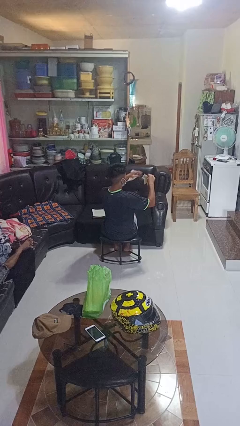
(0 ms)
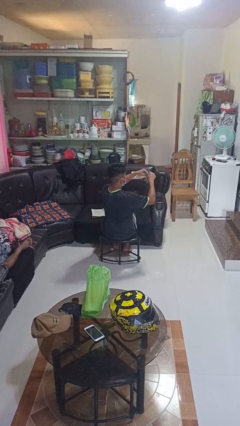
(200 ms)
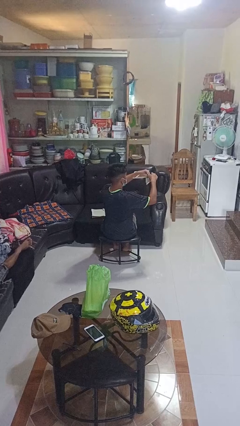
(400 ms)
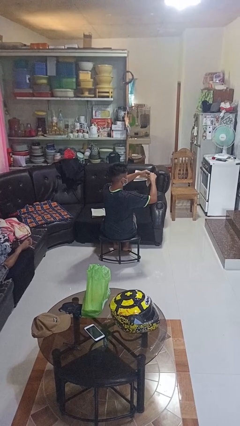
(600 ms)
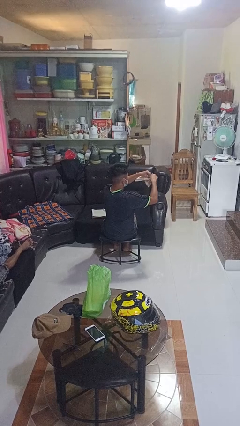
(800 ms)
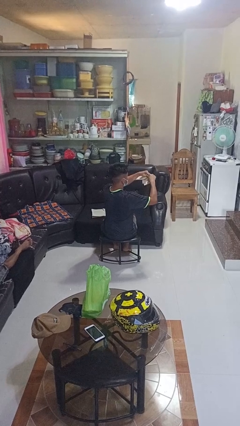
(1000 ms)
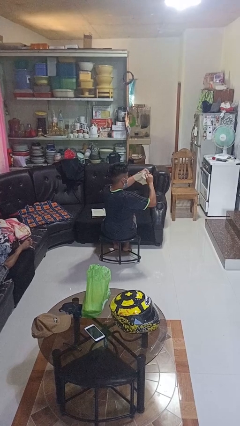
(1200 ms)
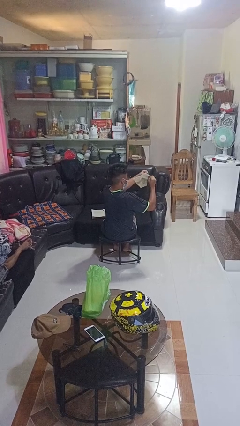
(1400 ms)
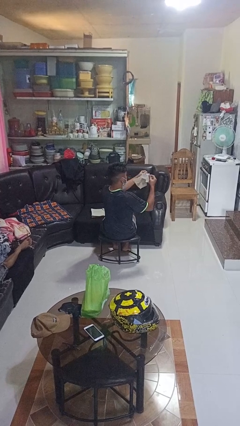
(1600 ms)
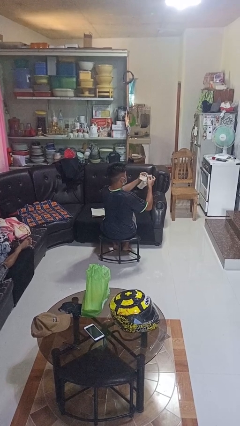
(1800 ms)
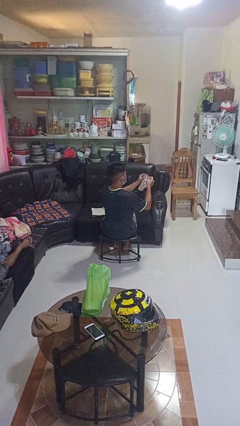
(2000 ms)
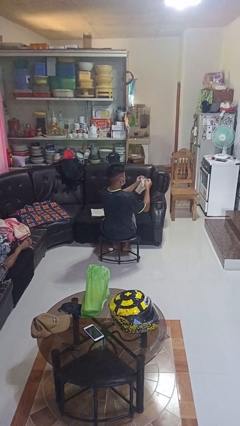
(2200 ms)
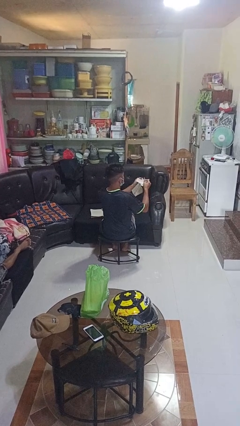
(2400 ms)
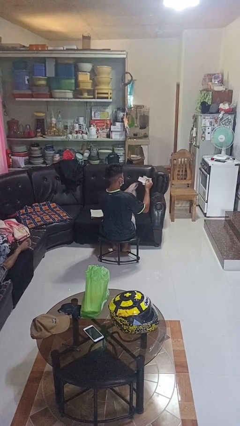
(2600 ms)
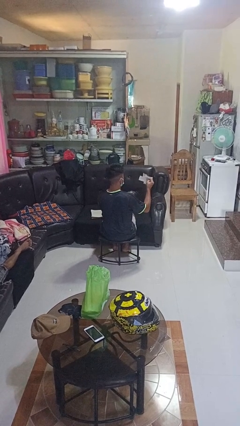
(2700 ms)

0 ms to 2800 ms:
person tears paper

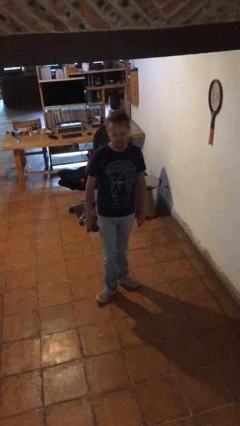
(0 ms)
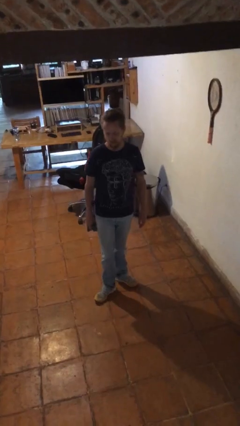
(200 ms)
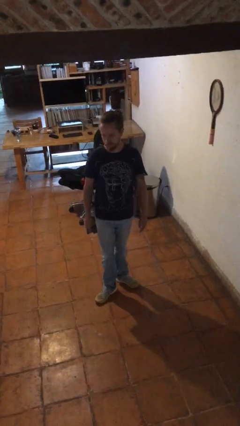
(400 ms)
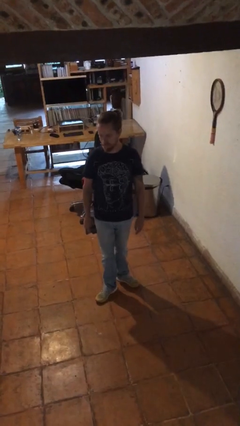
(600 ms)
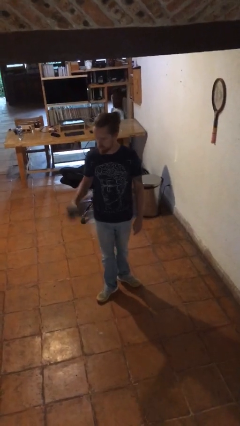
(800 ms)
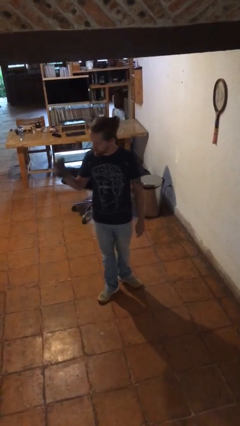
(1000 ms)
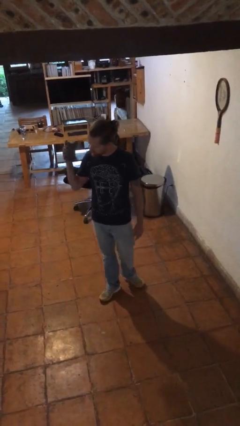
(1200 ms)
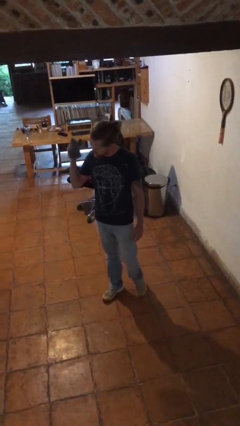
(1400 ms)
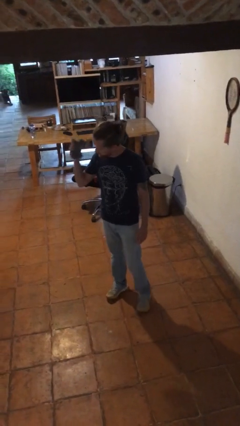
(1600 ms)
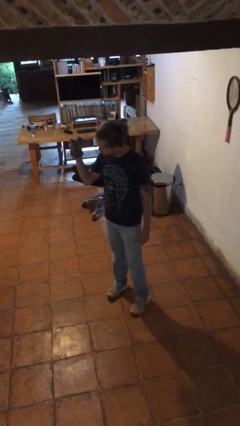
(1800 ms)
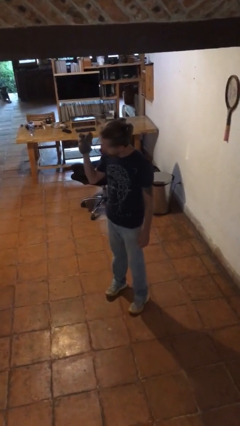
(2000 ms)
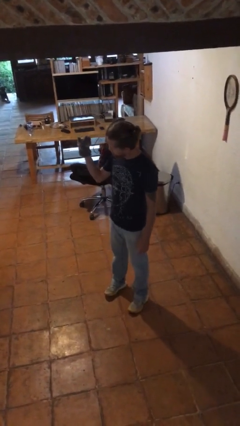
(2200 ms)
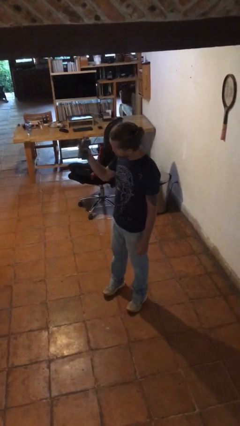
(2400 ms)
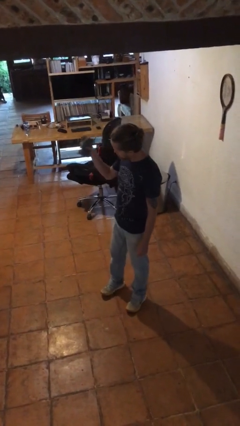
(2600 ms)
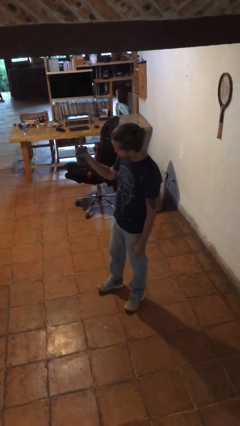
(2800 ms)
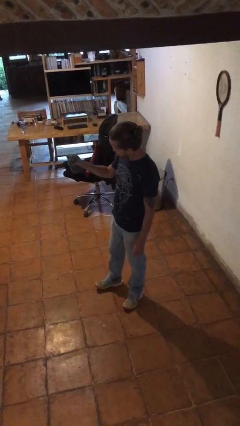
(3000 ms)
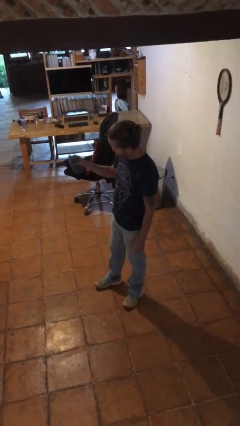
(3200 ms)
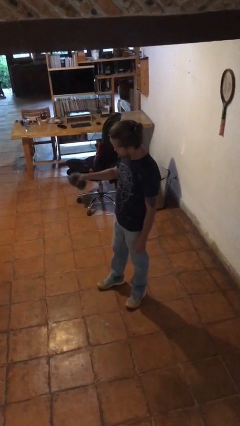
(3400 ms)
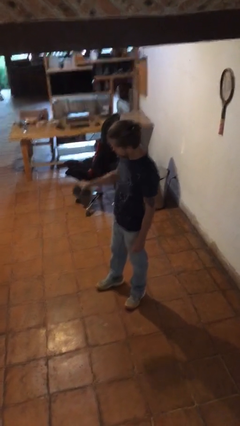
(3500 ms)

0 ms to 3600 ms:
person squeezes object

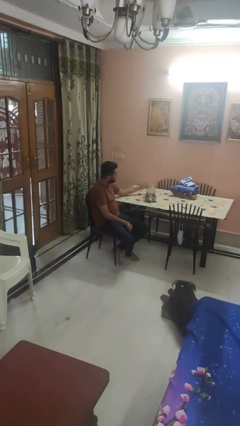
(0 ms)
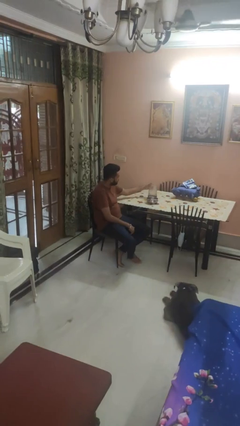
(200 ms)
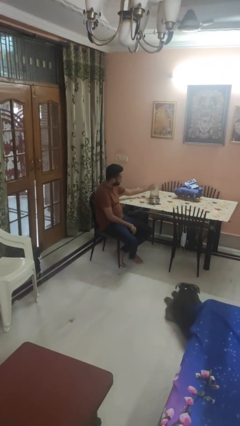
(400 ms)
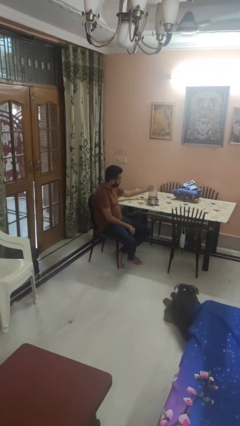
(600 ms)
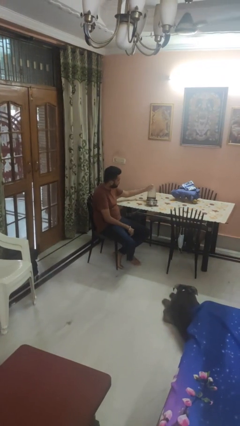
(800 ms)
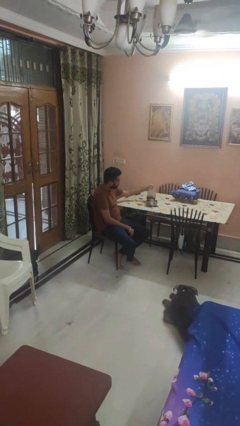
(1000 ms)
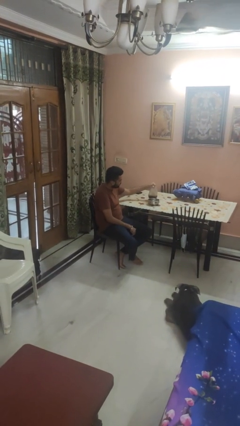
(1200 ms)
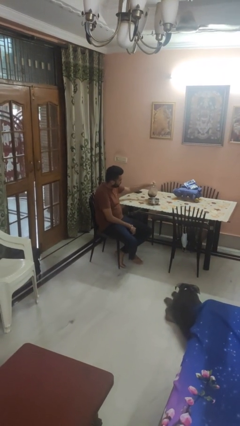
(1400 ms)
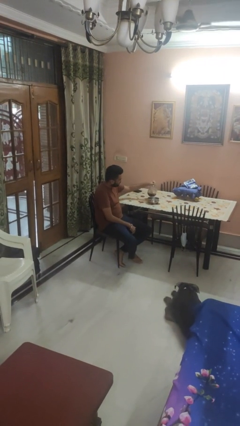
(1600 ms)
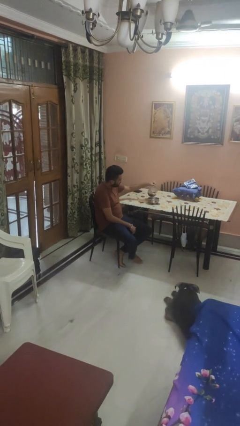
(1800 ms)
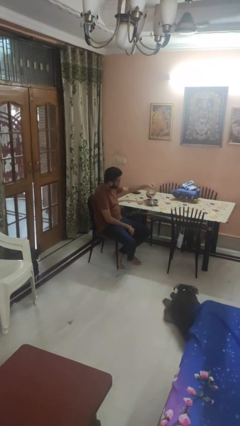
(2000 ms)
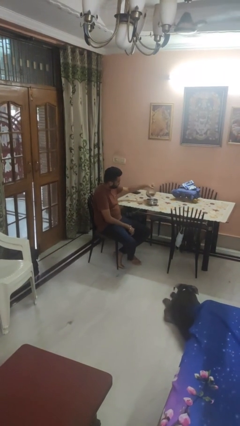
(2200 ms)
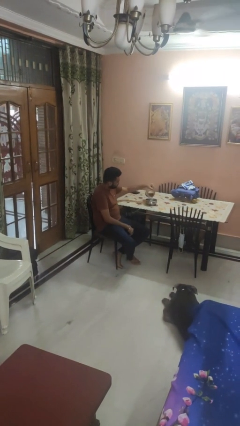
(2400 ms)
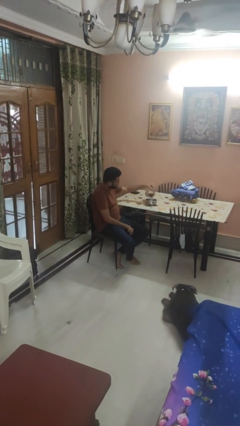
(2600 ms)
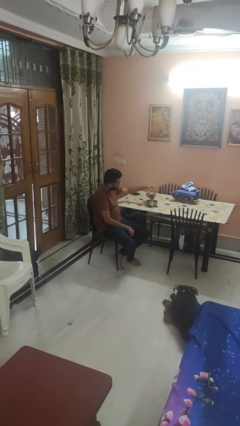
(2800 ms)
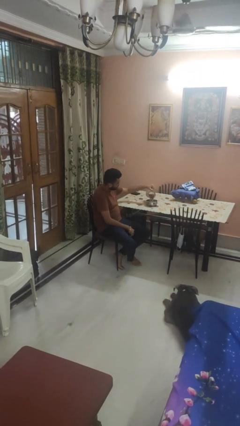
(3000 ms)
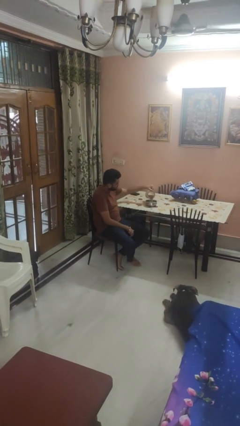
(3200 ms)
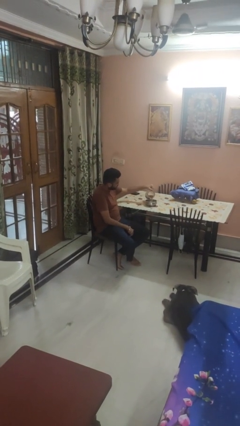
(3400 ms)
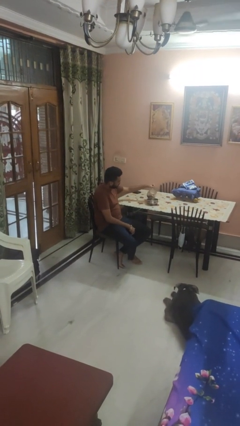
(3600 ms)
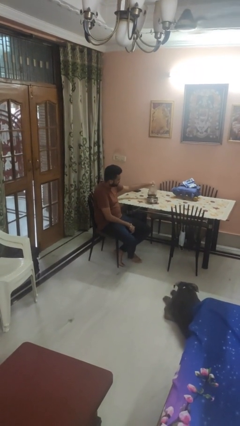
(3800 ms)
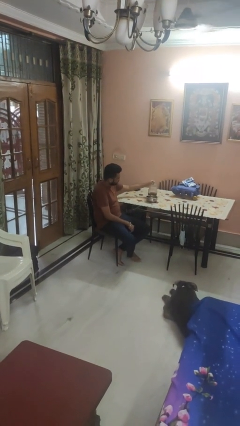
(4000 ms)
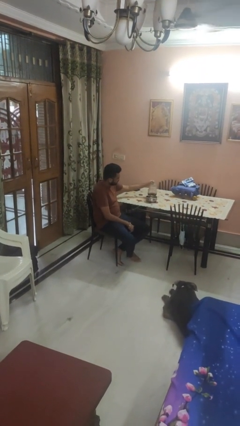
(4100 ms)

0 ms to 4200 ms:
person pours into bowl

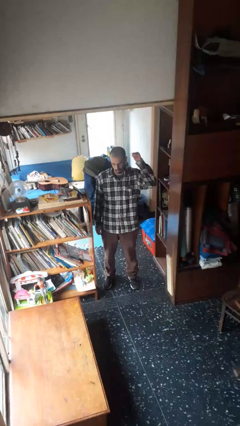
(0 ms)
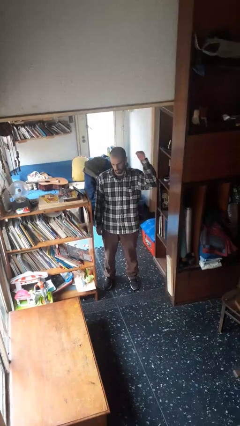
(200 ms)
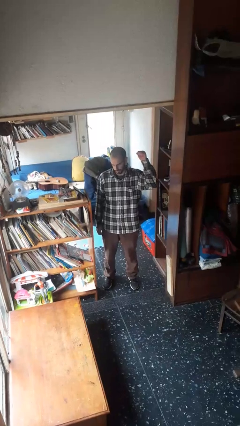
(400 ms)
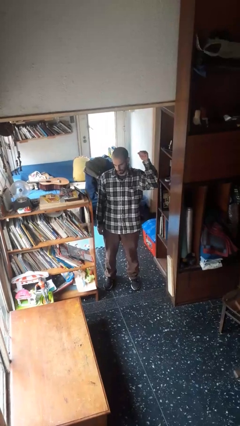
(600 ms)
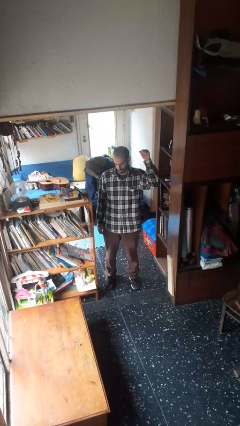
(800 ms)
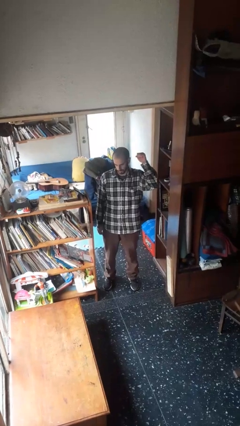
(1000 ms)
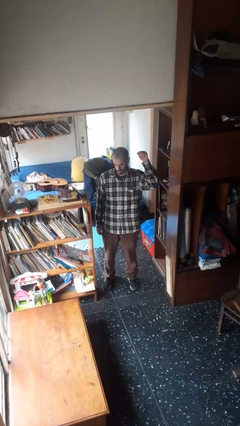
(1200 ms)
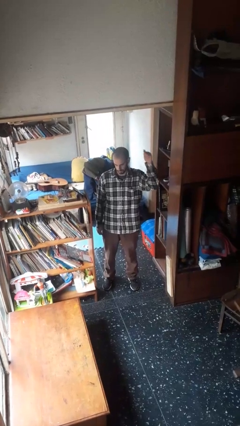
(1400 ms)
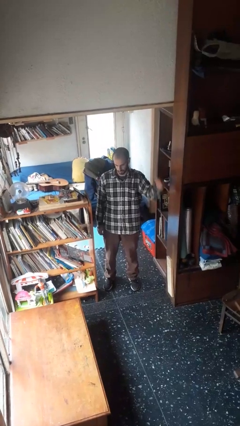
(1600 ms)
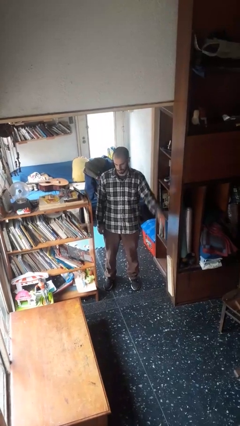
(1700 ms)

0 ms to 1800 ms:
person gestures behind me

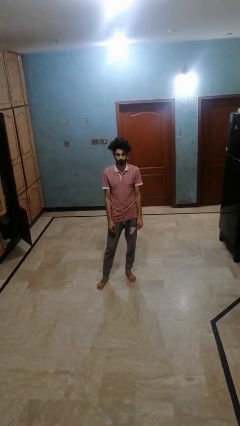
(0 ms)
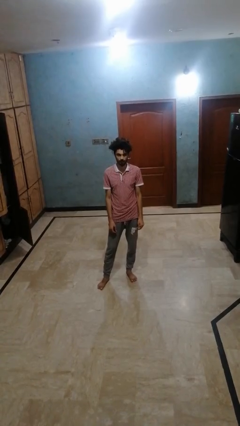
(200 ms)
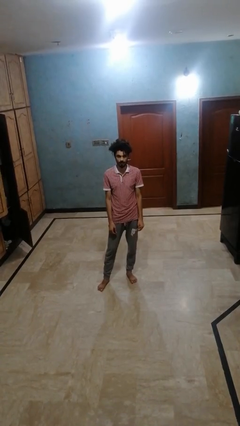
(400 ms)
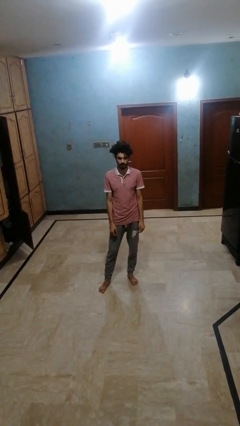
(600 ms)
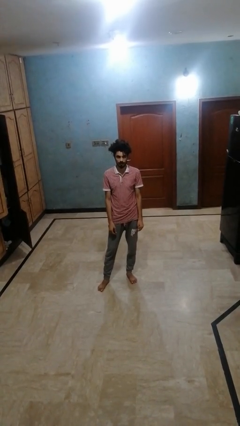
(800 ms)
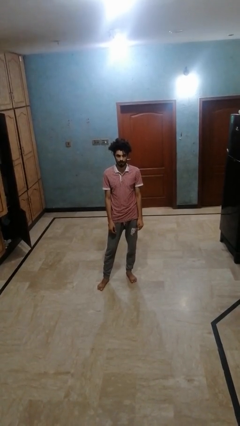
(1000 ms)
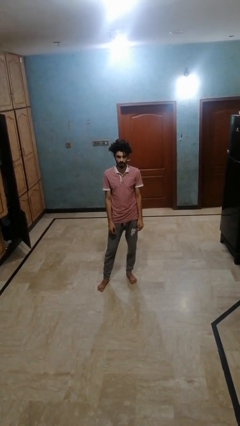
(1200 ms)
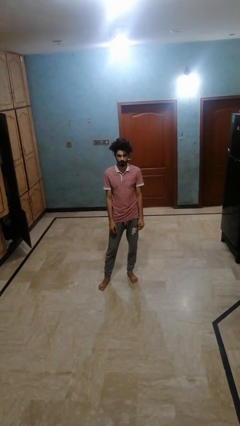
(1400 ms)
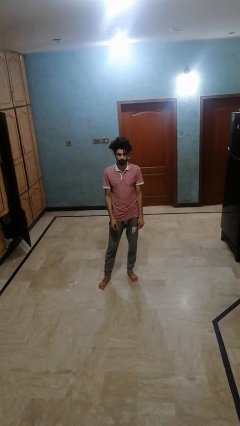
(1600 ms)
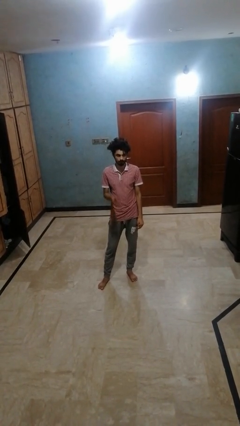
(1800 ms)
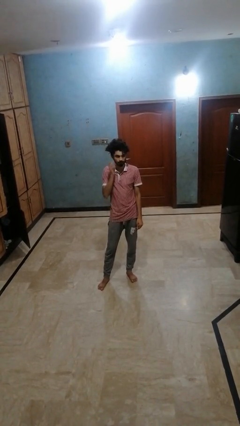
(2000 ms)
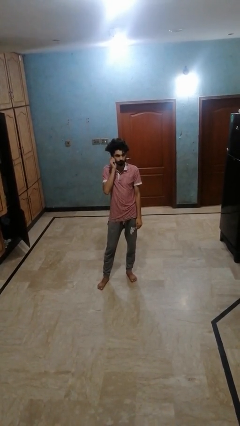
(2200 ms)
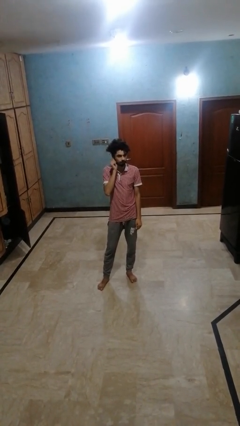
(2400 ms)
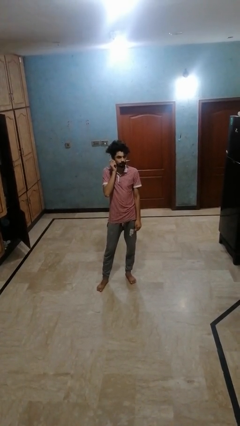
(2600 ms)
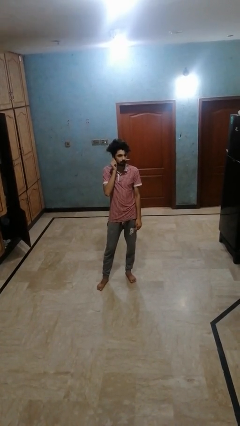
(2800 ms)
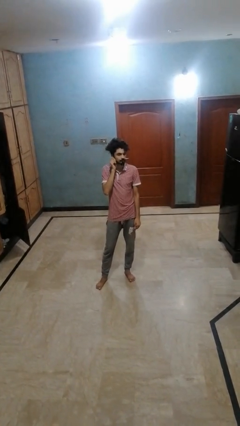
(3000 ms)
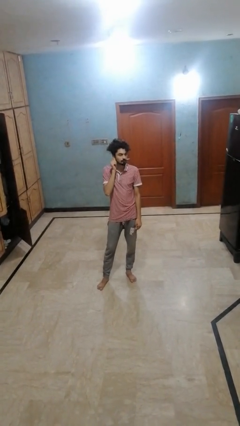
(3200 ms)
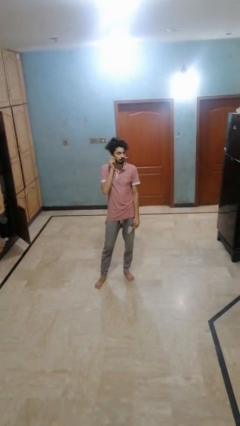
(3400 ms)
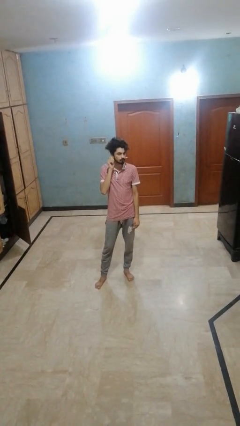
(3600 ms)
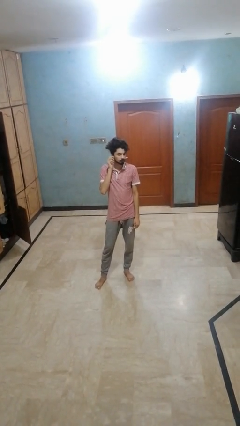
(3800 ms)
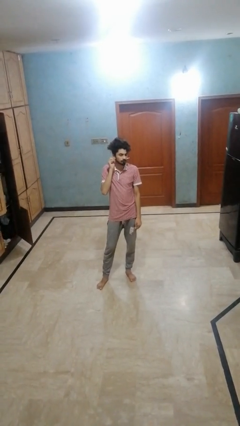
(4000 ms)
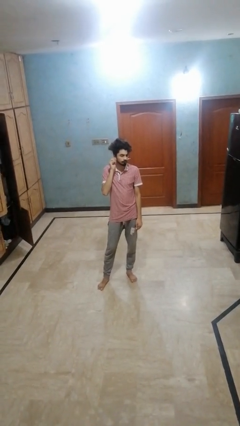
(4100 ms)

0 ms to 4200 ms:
person touches earlobe

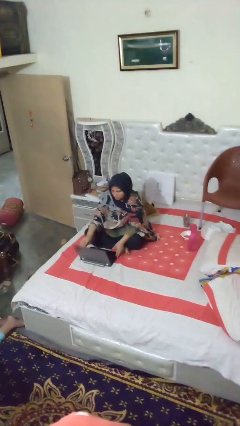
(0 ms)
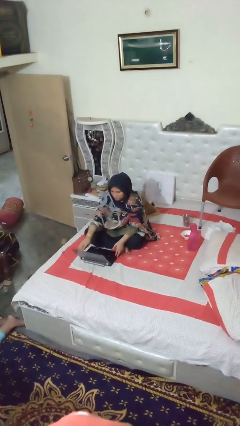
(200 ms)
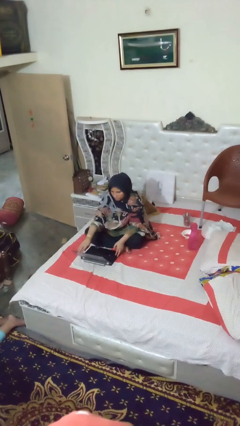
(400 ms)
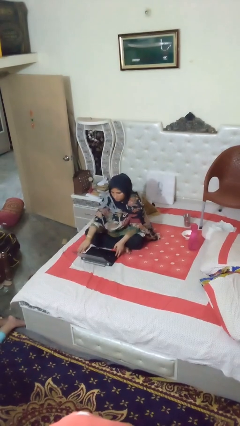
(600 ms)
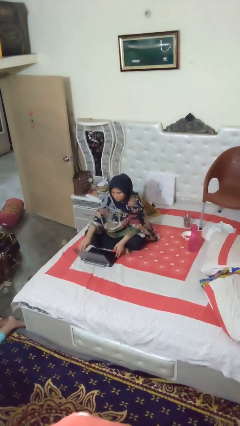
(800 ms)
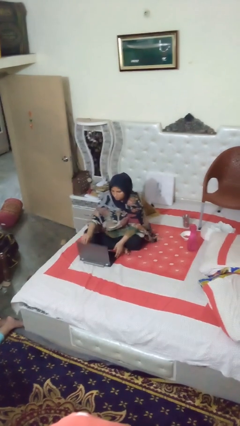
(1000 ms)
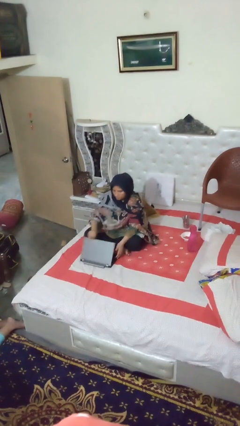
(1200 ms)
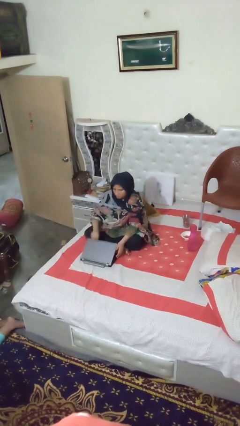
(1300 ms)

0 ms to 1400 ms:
person closes laptop
